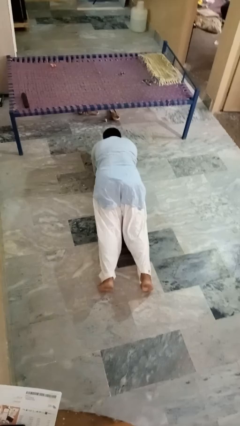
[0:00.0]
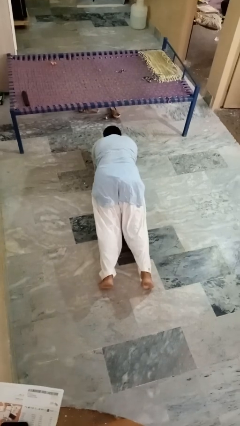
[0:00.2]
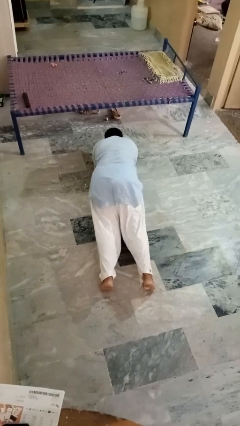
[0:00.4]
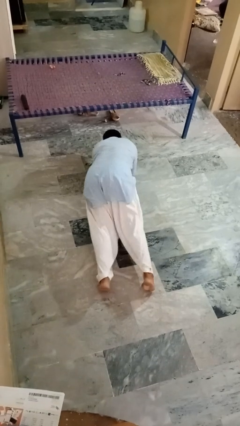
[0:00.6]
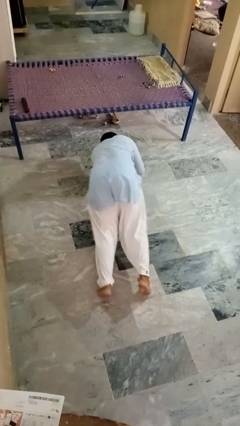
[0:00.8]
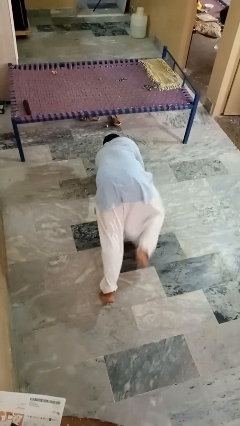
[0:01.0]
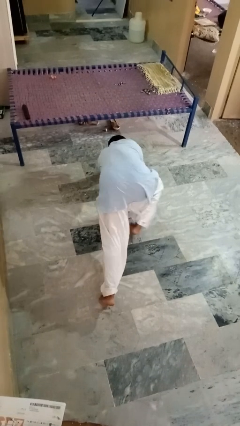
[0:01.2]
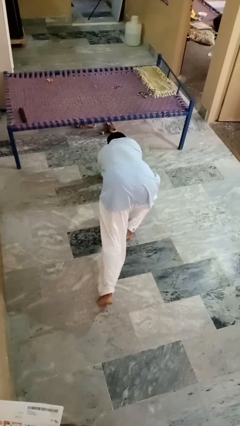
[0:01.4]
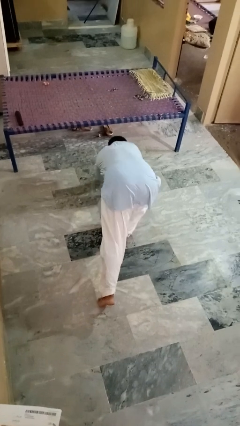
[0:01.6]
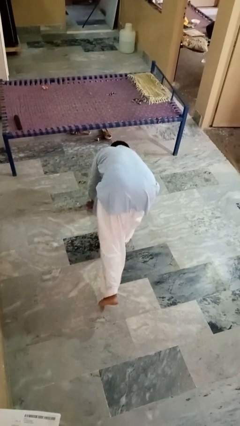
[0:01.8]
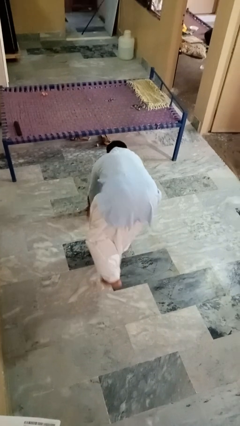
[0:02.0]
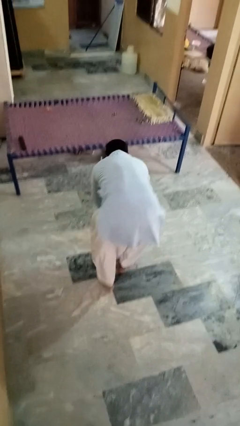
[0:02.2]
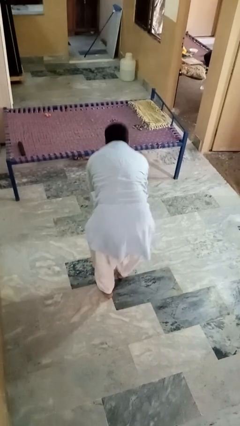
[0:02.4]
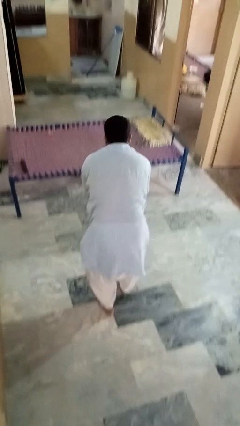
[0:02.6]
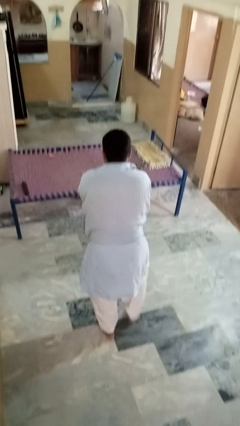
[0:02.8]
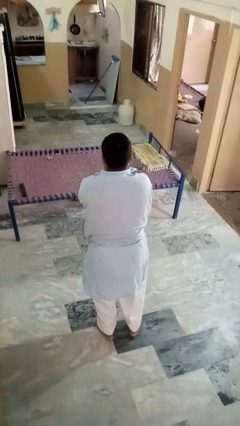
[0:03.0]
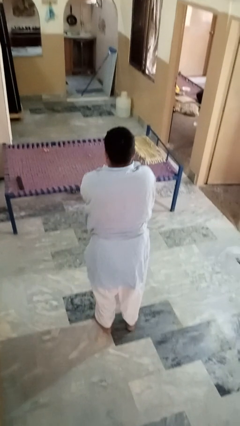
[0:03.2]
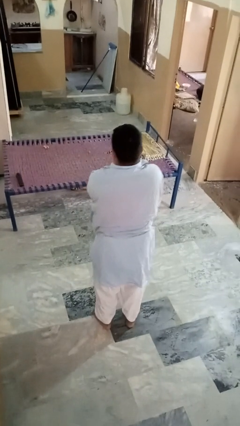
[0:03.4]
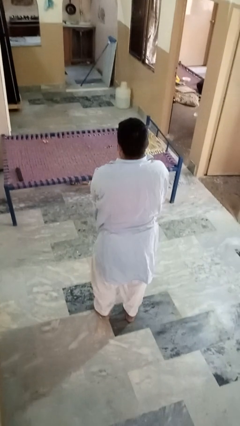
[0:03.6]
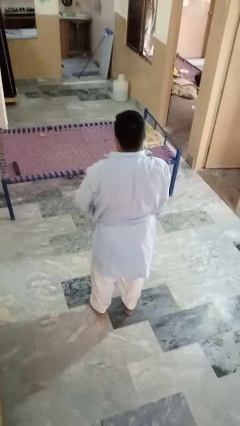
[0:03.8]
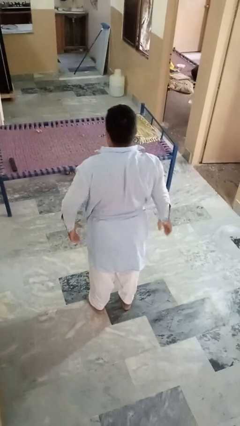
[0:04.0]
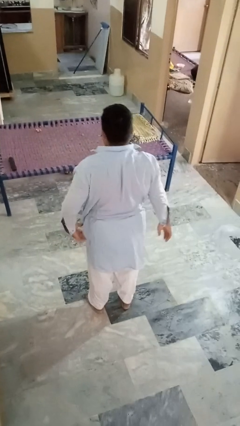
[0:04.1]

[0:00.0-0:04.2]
person stands up from floor

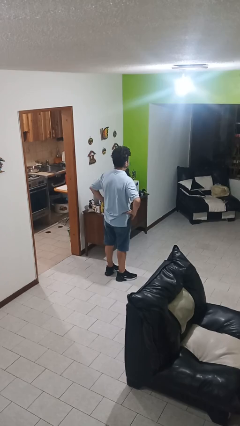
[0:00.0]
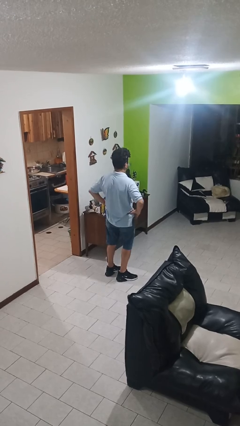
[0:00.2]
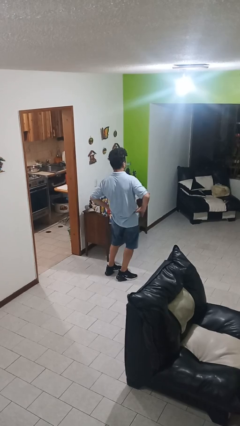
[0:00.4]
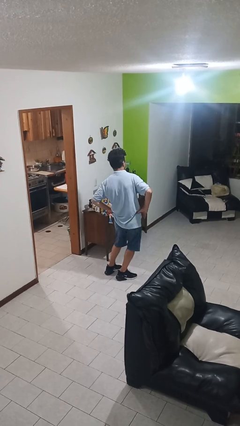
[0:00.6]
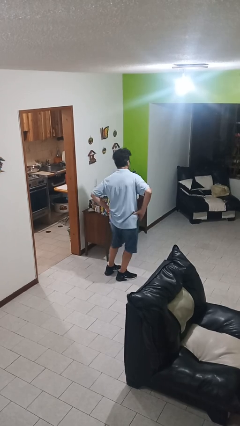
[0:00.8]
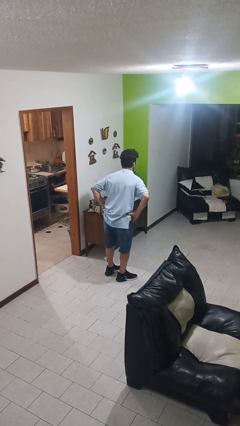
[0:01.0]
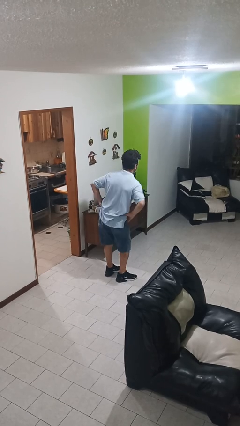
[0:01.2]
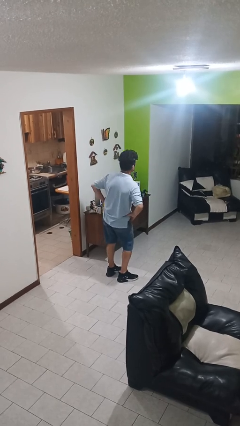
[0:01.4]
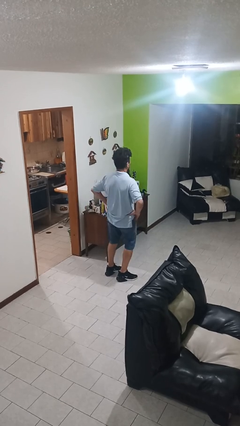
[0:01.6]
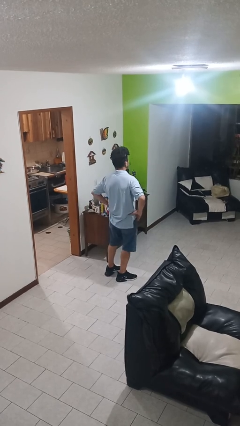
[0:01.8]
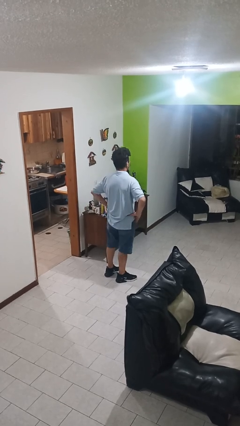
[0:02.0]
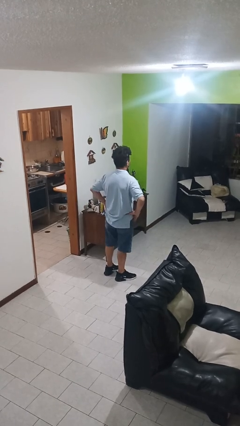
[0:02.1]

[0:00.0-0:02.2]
person wiggles hips

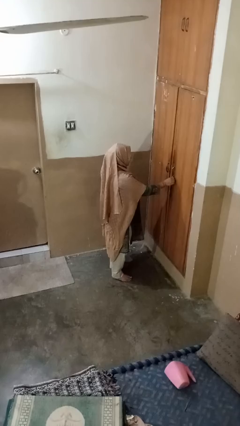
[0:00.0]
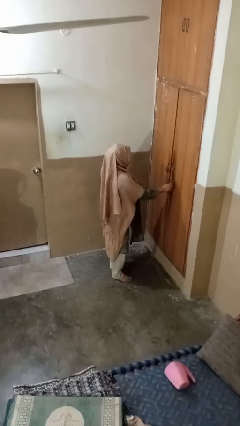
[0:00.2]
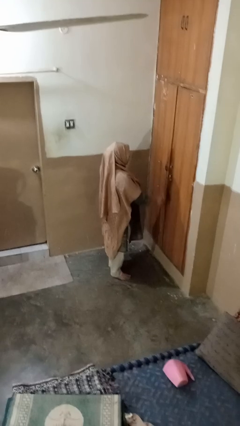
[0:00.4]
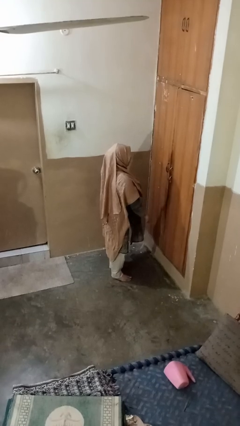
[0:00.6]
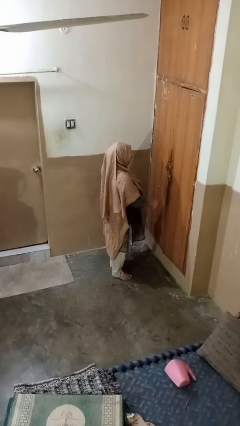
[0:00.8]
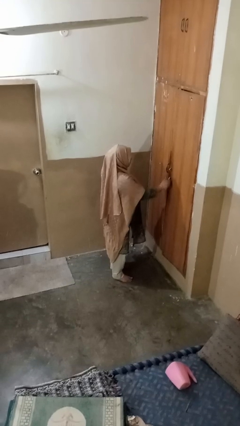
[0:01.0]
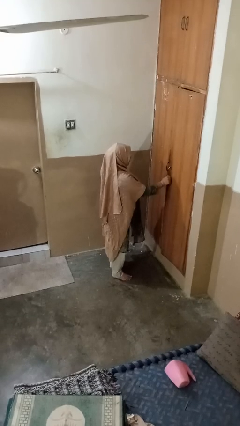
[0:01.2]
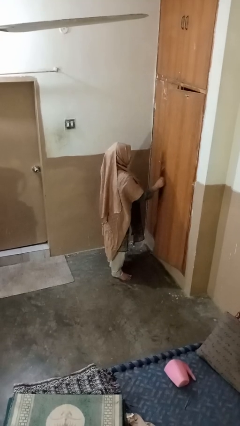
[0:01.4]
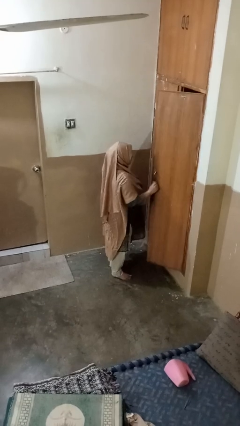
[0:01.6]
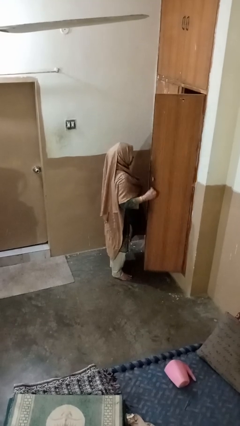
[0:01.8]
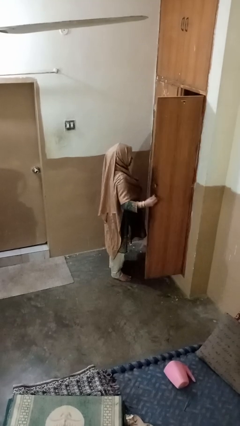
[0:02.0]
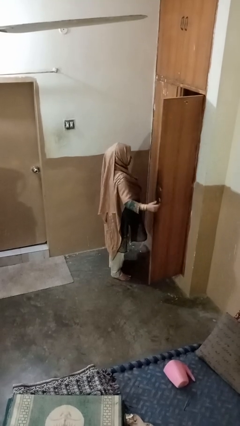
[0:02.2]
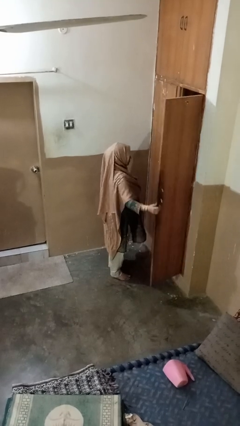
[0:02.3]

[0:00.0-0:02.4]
person opens closet door

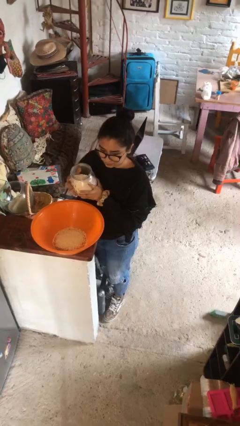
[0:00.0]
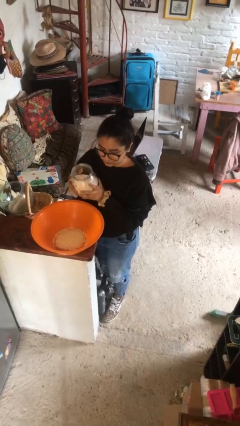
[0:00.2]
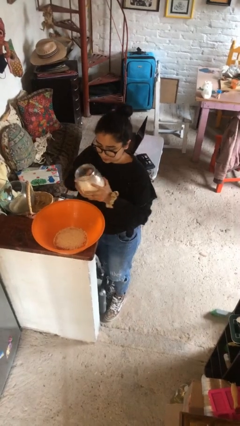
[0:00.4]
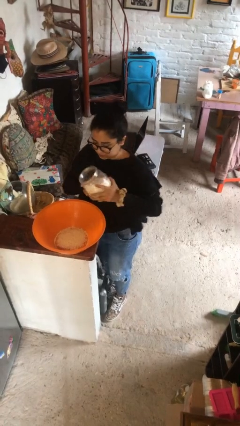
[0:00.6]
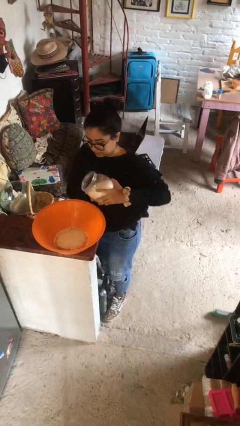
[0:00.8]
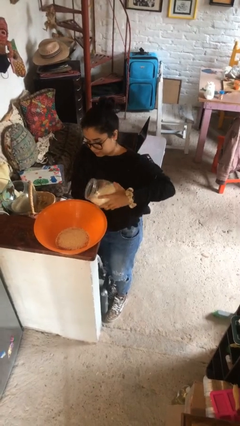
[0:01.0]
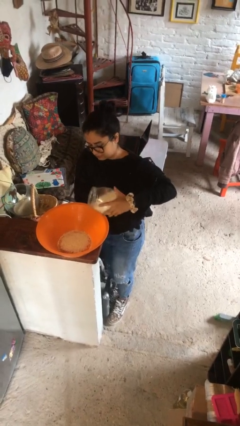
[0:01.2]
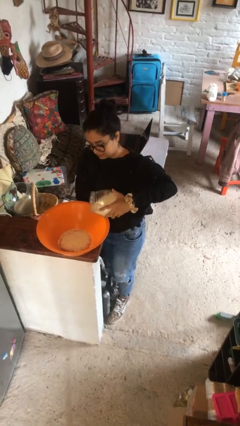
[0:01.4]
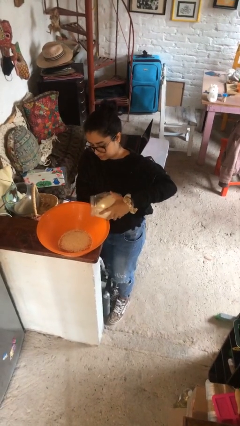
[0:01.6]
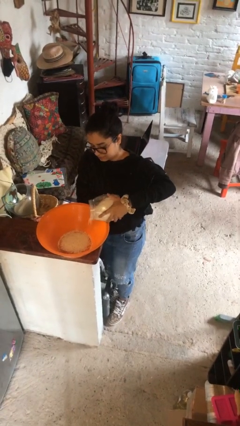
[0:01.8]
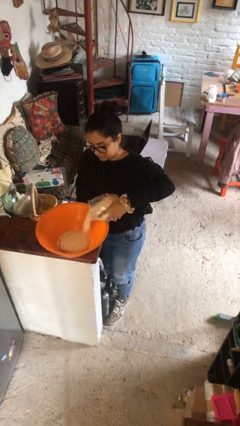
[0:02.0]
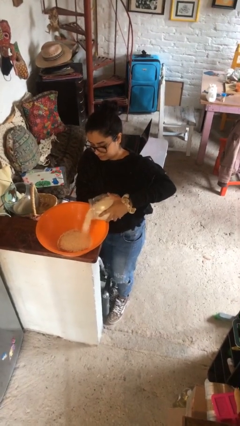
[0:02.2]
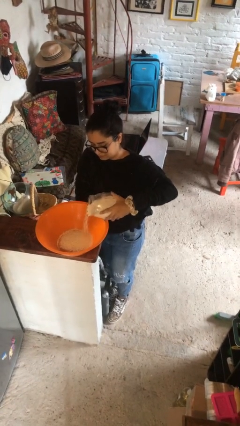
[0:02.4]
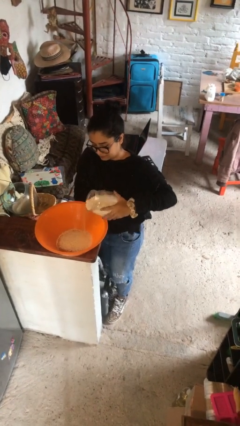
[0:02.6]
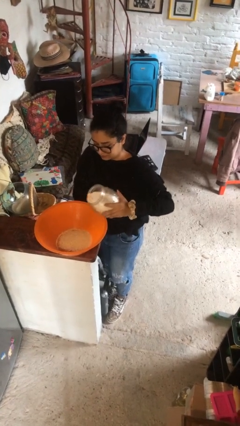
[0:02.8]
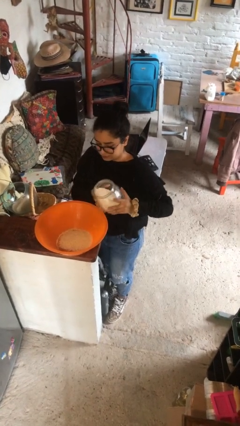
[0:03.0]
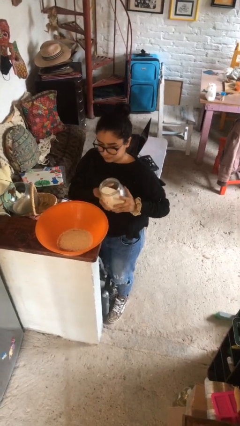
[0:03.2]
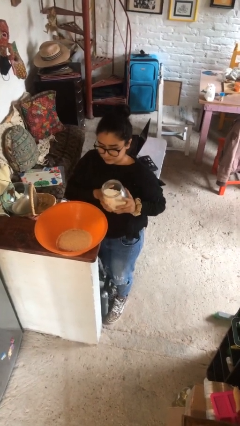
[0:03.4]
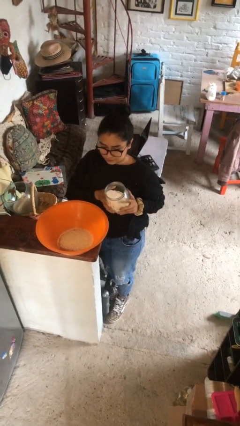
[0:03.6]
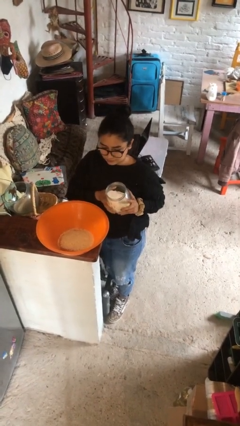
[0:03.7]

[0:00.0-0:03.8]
person pours into bowl

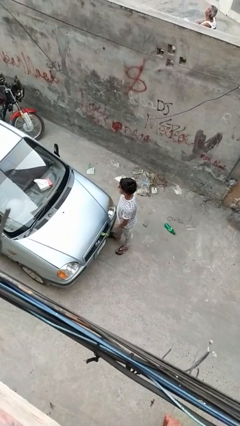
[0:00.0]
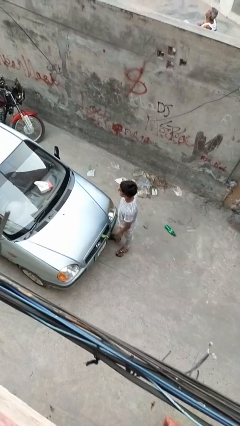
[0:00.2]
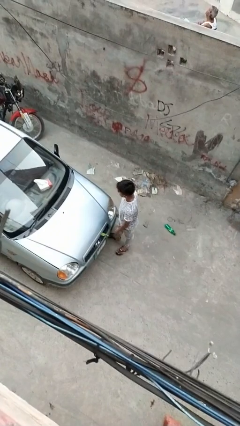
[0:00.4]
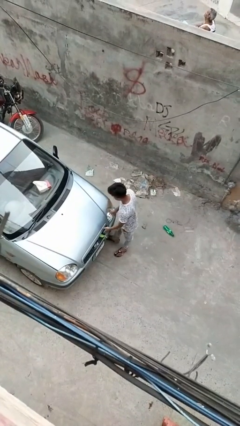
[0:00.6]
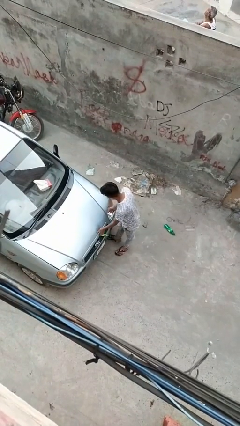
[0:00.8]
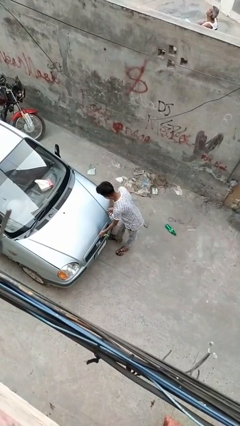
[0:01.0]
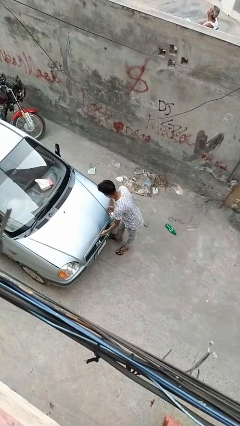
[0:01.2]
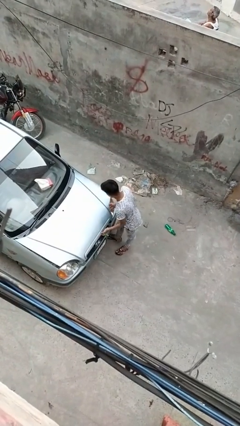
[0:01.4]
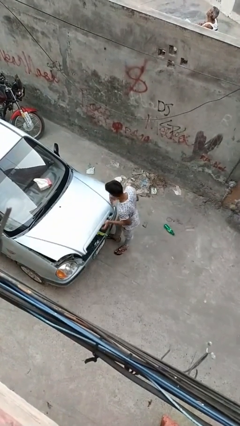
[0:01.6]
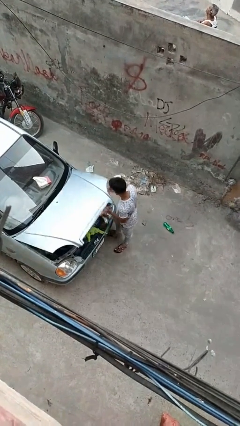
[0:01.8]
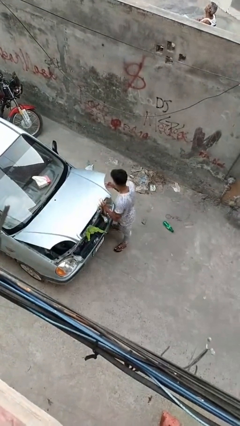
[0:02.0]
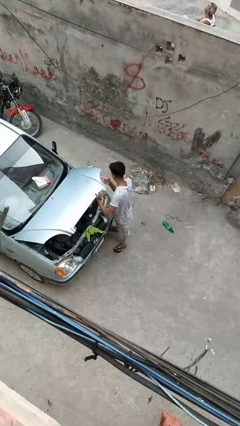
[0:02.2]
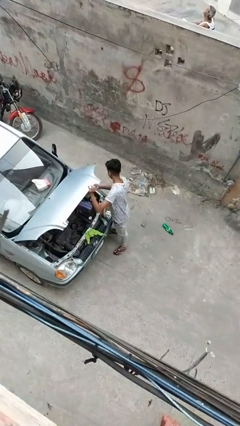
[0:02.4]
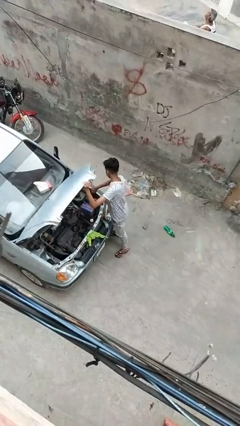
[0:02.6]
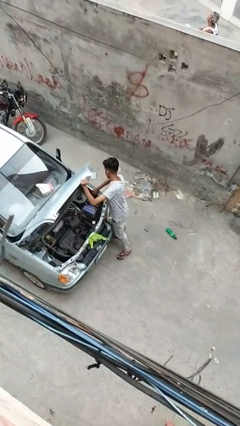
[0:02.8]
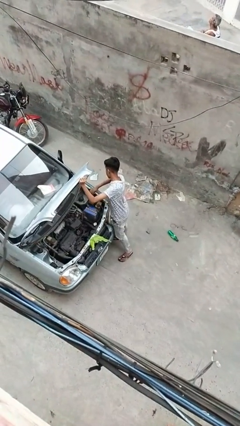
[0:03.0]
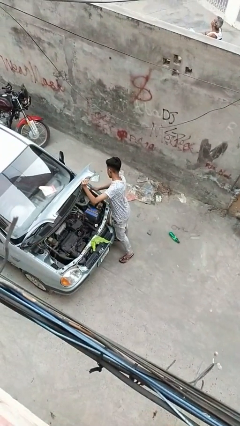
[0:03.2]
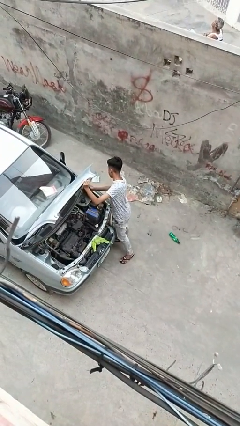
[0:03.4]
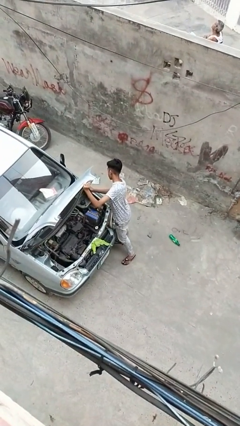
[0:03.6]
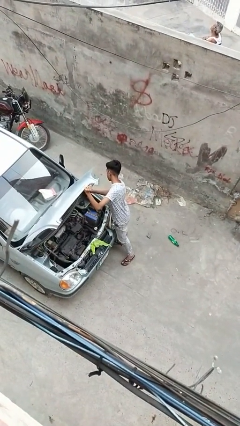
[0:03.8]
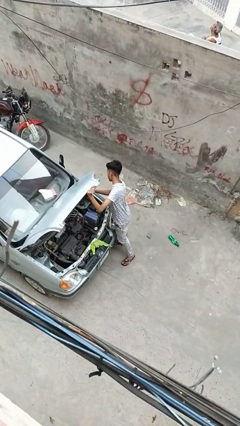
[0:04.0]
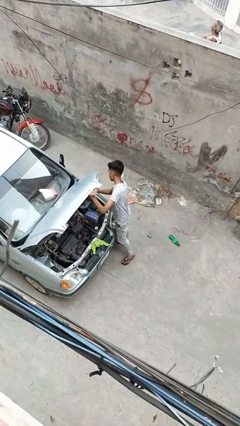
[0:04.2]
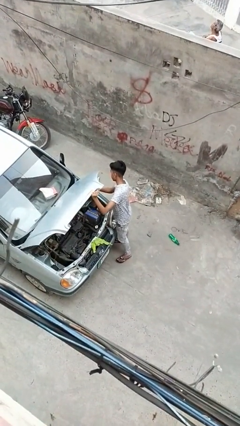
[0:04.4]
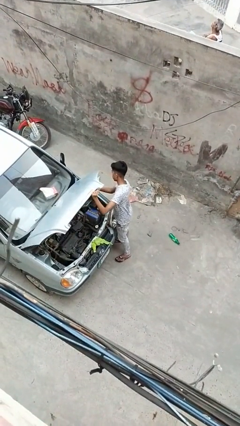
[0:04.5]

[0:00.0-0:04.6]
person opens car hood
